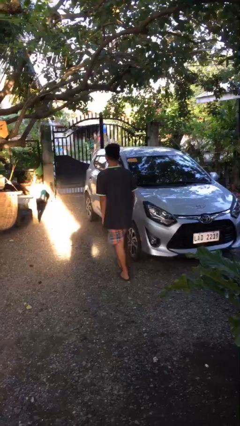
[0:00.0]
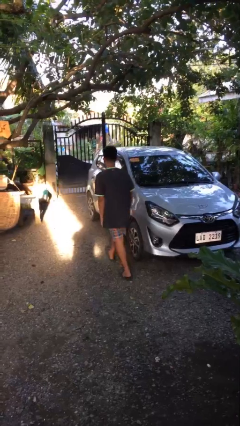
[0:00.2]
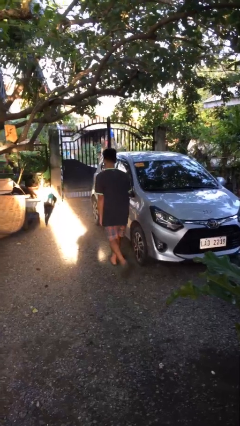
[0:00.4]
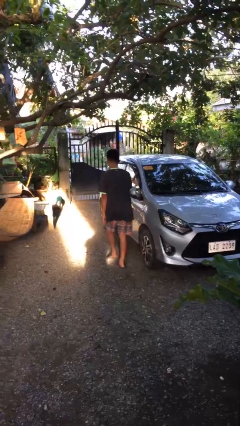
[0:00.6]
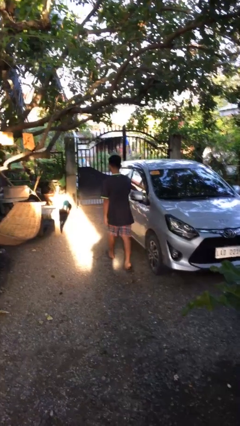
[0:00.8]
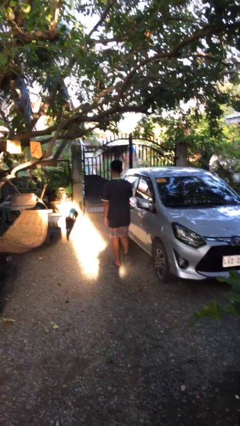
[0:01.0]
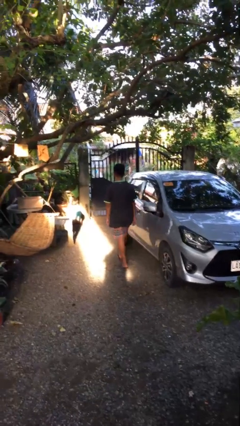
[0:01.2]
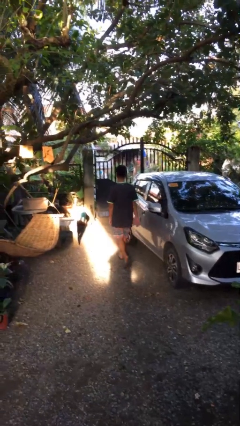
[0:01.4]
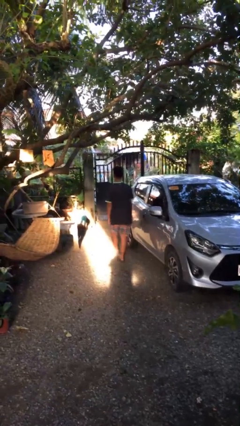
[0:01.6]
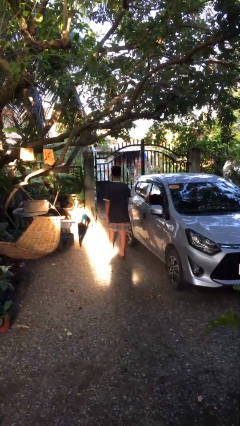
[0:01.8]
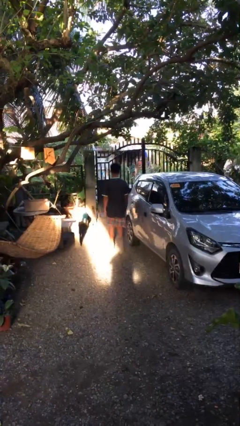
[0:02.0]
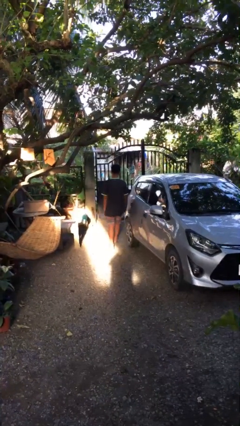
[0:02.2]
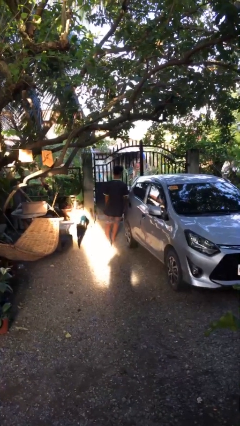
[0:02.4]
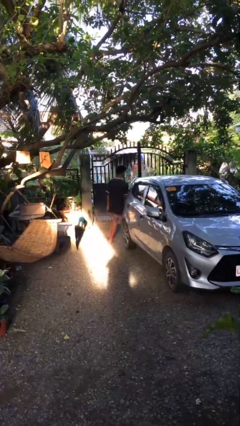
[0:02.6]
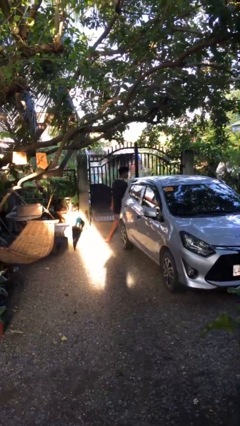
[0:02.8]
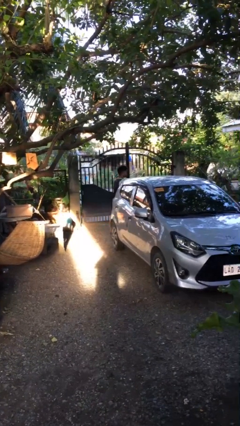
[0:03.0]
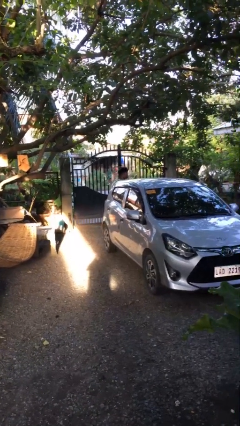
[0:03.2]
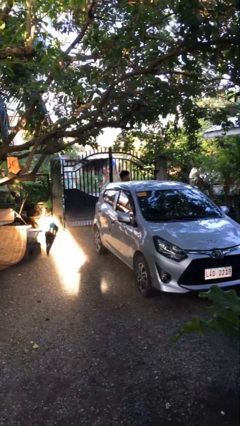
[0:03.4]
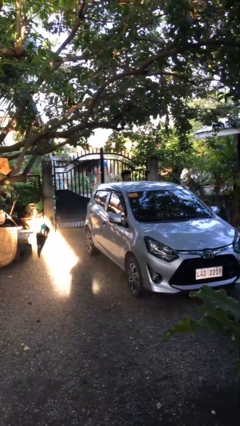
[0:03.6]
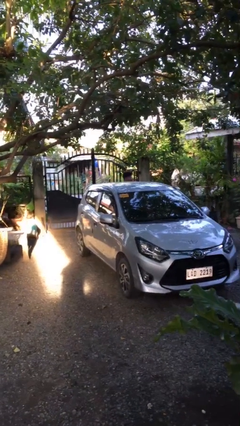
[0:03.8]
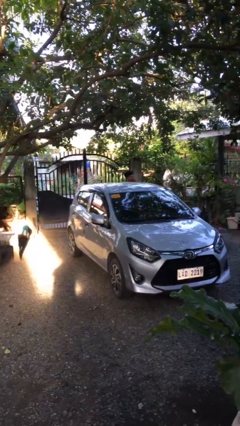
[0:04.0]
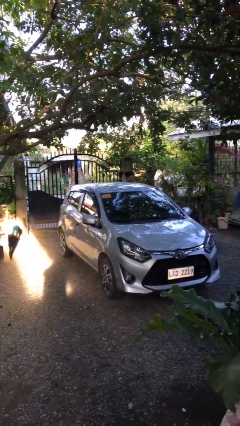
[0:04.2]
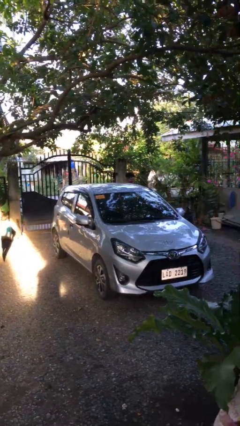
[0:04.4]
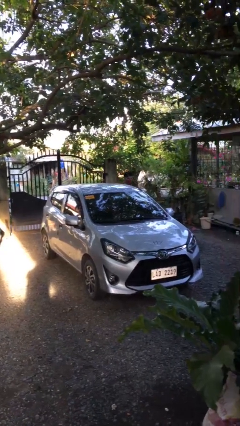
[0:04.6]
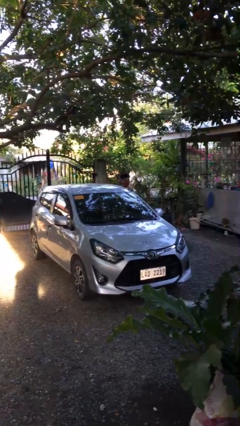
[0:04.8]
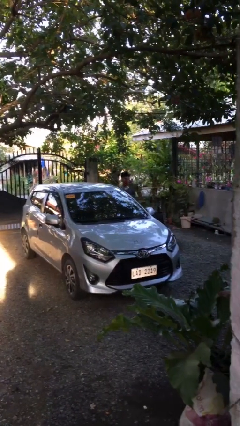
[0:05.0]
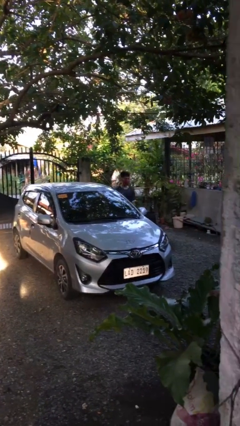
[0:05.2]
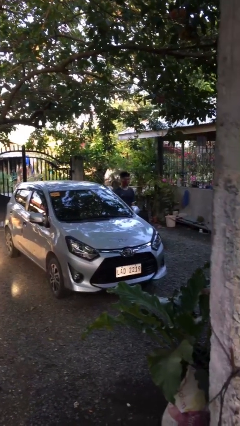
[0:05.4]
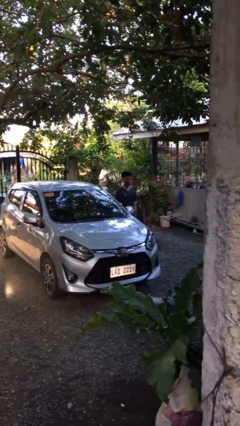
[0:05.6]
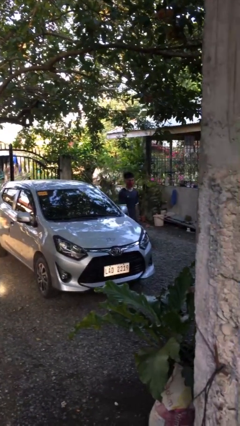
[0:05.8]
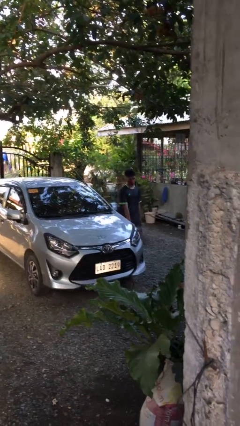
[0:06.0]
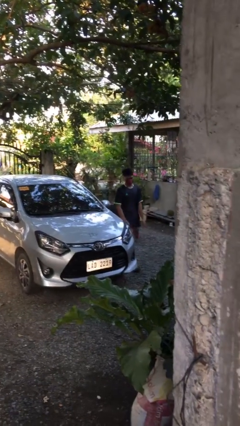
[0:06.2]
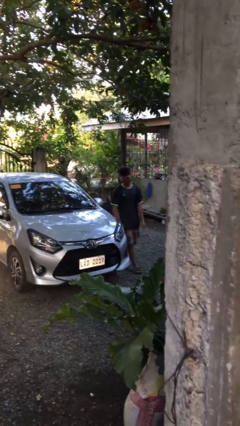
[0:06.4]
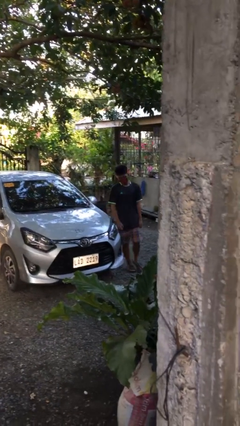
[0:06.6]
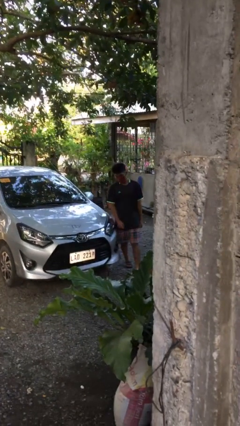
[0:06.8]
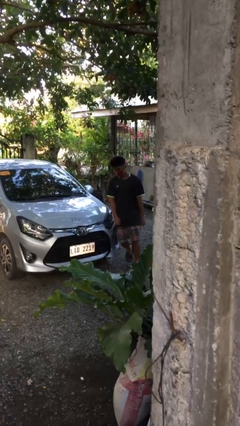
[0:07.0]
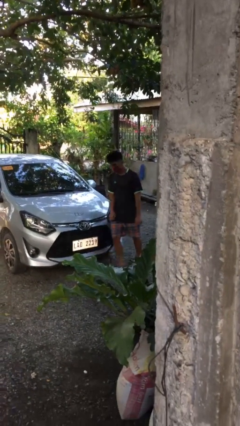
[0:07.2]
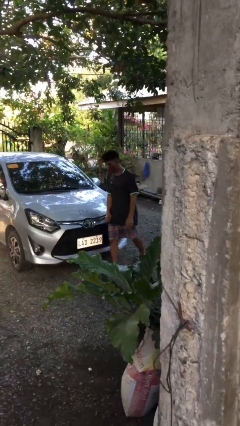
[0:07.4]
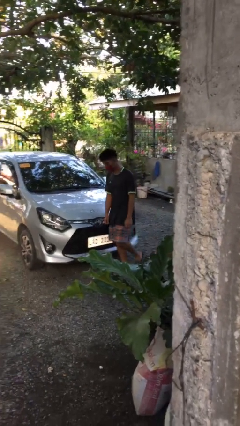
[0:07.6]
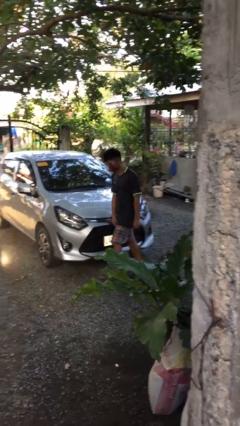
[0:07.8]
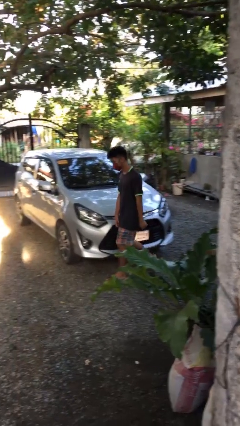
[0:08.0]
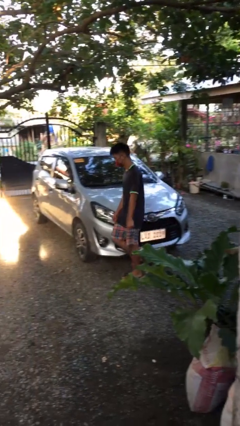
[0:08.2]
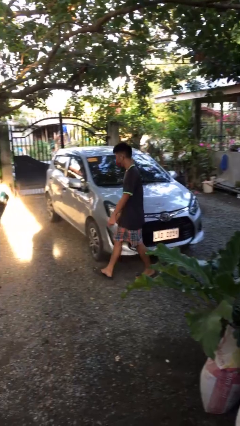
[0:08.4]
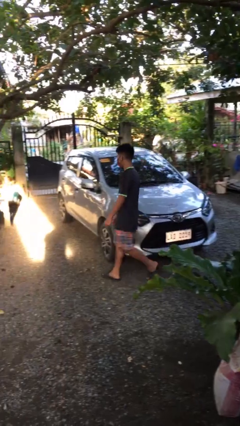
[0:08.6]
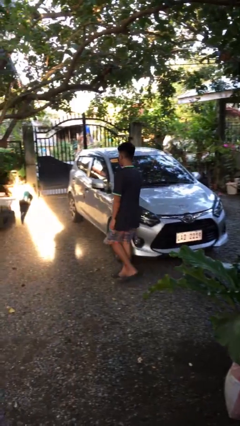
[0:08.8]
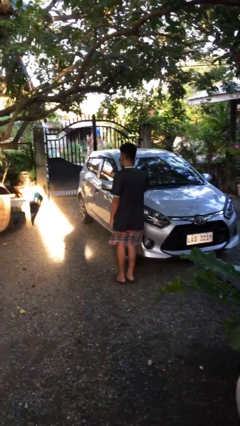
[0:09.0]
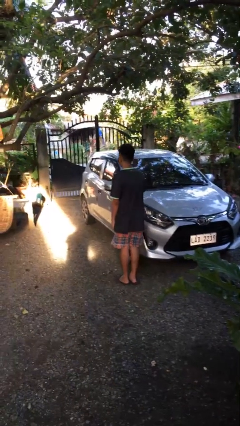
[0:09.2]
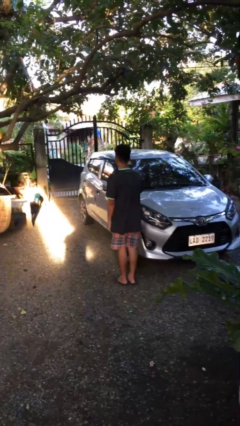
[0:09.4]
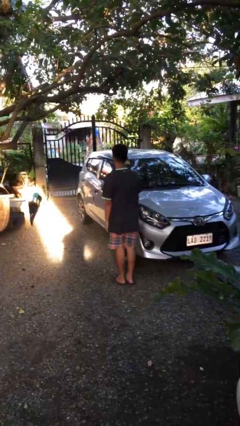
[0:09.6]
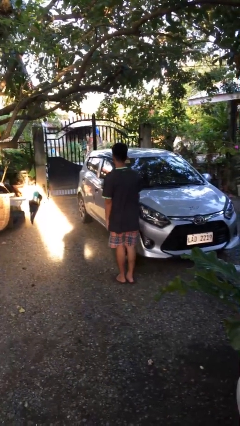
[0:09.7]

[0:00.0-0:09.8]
person walks around car

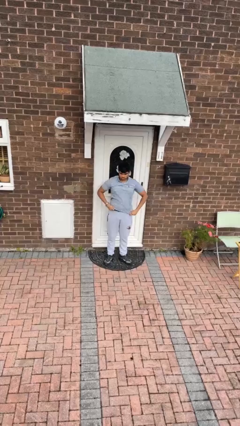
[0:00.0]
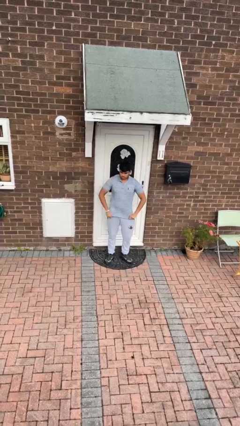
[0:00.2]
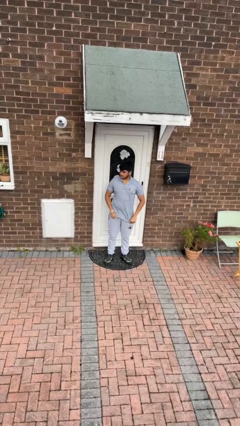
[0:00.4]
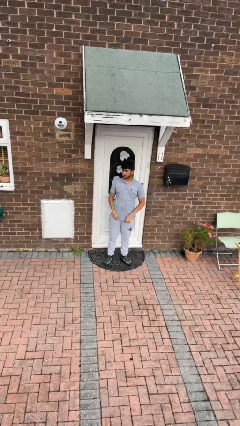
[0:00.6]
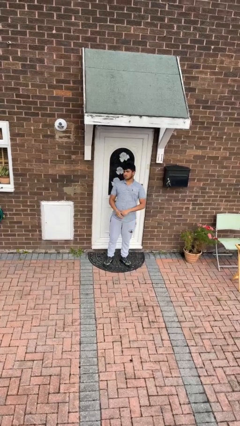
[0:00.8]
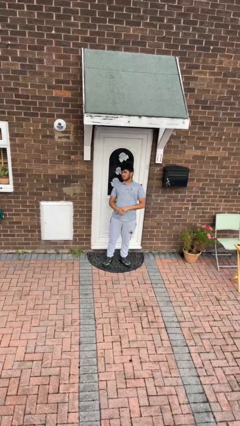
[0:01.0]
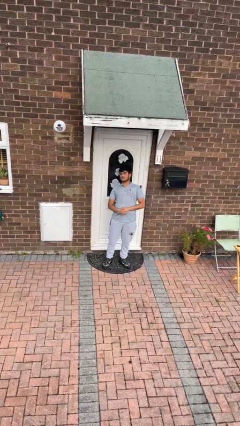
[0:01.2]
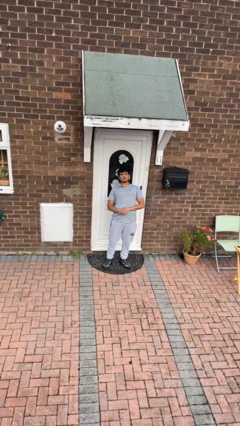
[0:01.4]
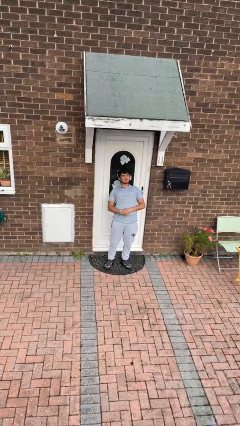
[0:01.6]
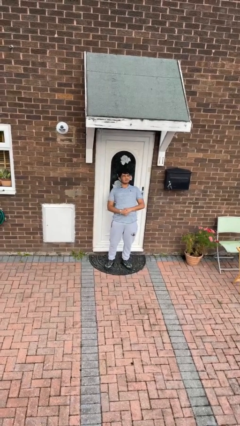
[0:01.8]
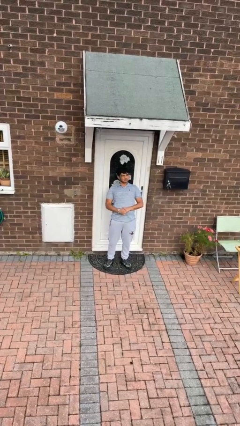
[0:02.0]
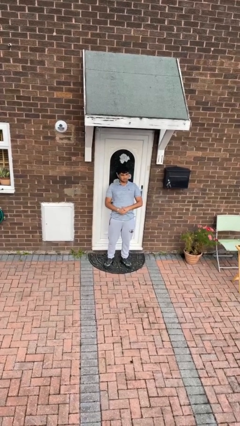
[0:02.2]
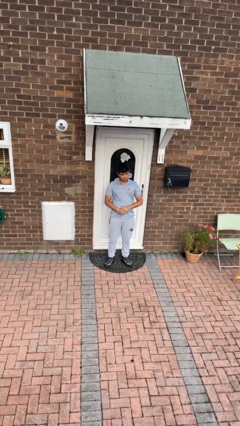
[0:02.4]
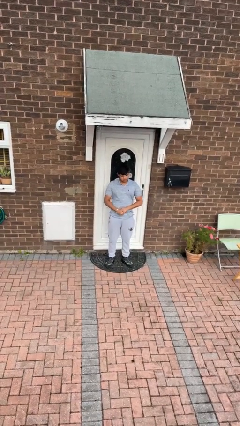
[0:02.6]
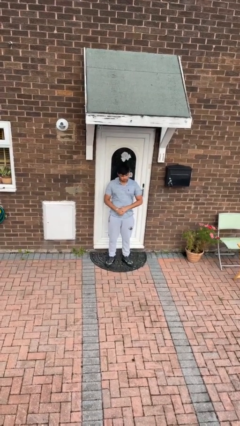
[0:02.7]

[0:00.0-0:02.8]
person stretches back

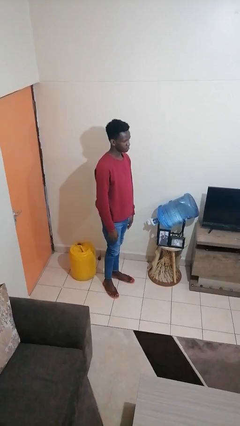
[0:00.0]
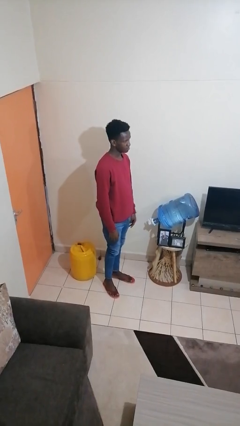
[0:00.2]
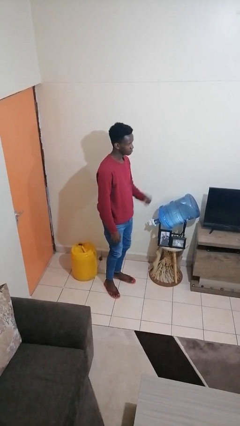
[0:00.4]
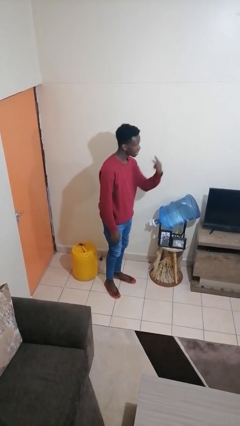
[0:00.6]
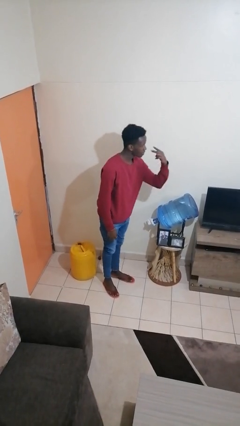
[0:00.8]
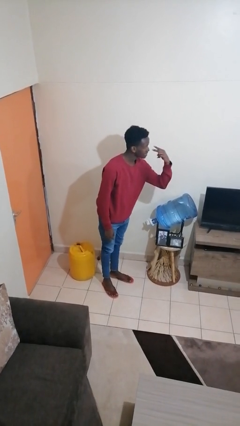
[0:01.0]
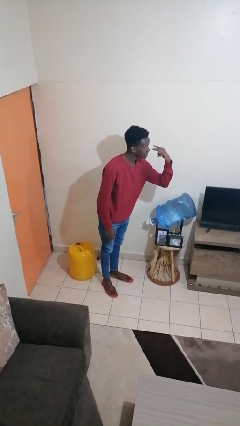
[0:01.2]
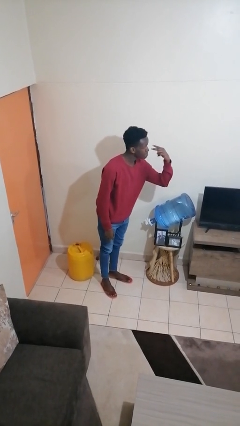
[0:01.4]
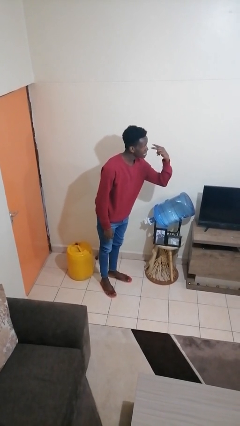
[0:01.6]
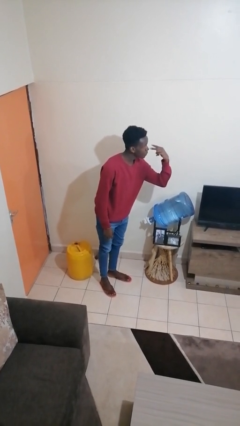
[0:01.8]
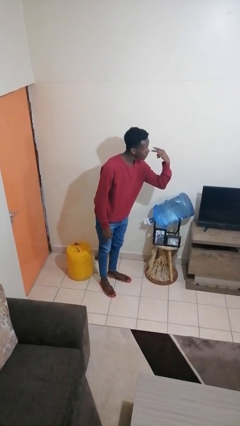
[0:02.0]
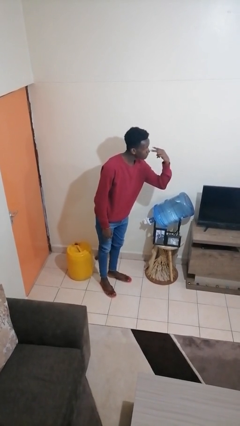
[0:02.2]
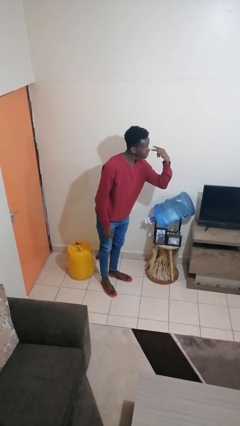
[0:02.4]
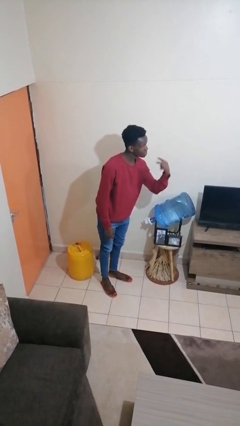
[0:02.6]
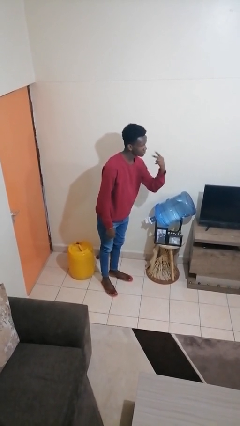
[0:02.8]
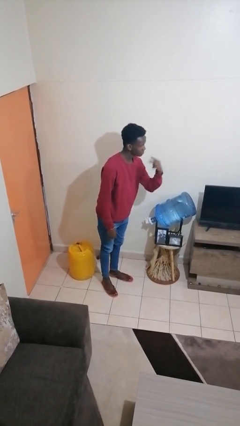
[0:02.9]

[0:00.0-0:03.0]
person gestures watch closely

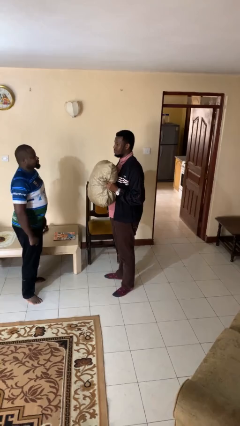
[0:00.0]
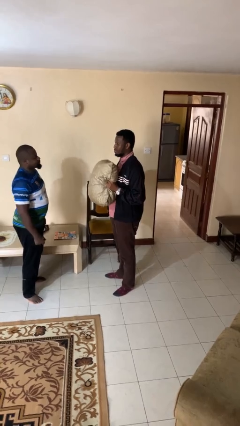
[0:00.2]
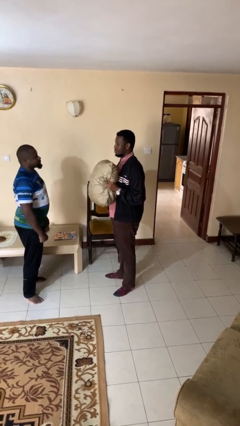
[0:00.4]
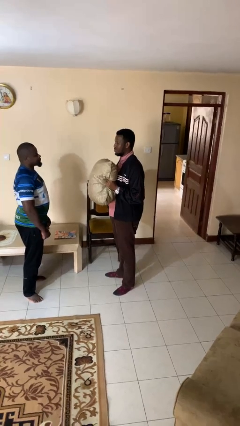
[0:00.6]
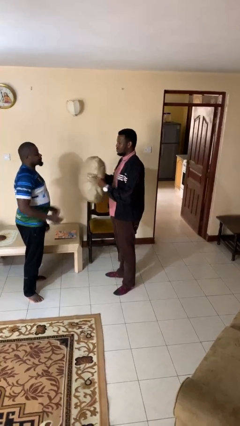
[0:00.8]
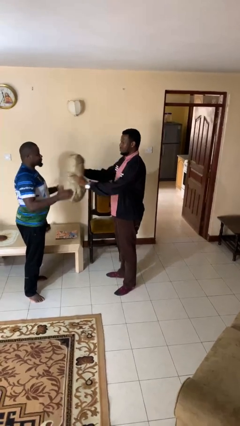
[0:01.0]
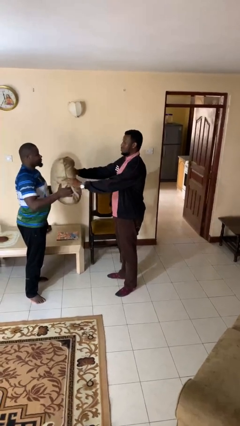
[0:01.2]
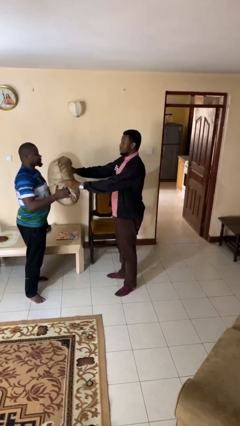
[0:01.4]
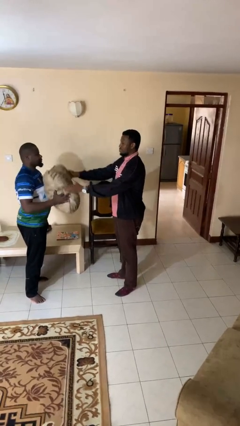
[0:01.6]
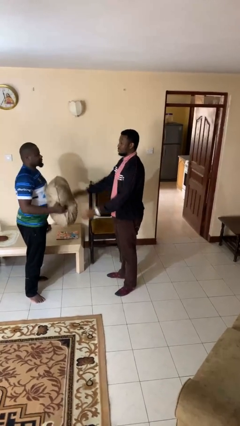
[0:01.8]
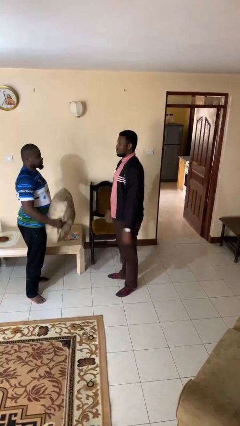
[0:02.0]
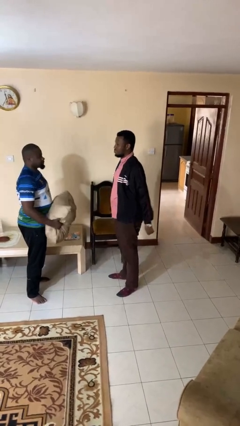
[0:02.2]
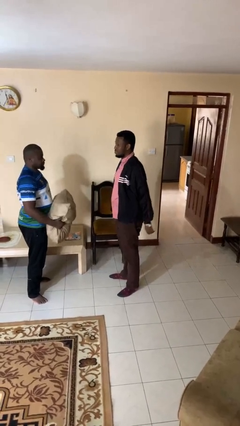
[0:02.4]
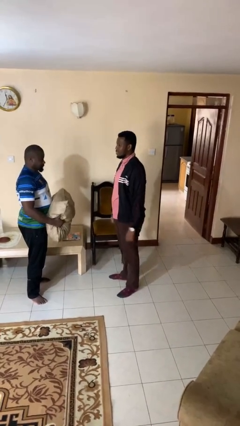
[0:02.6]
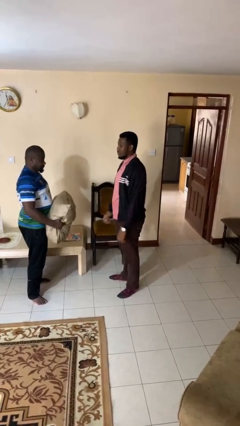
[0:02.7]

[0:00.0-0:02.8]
person transfers object to person
